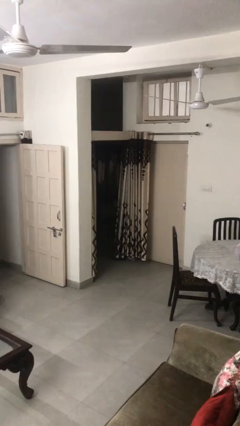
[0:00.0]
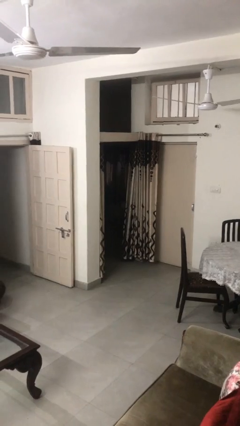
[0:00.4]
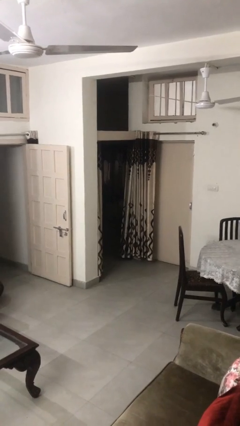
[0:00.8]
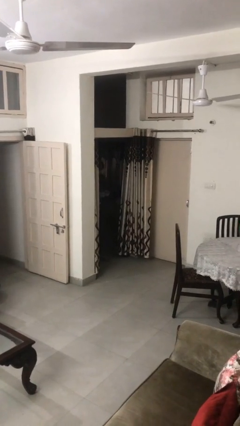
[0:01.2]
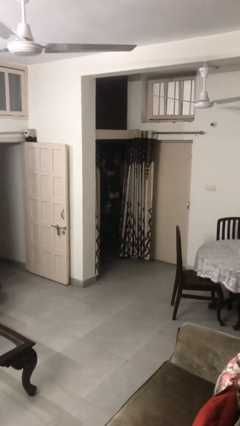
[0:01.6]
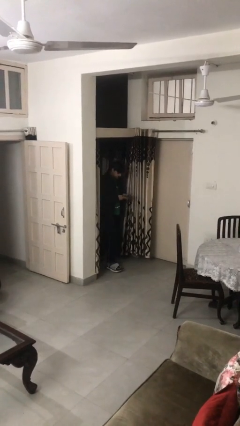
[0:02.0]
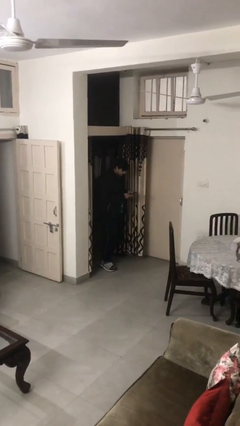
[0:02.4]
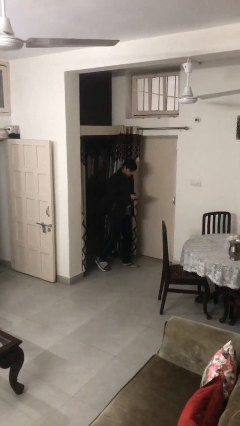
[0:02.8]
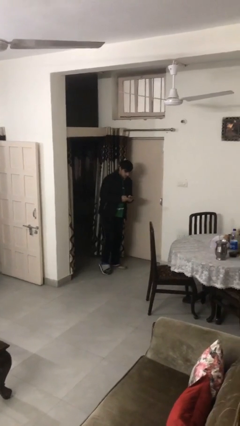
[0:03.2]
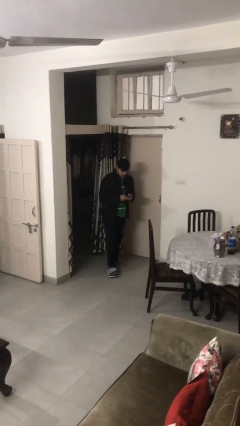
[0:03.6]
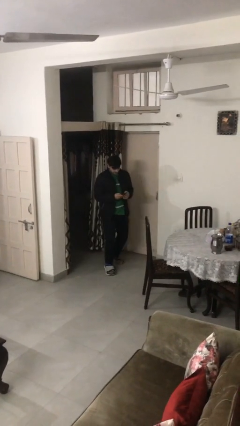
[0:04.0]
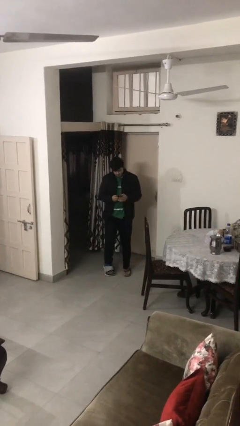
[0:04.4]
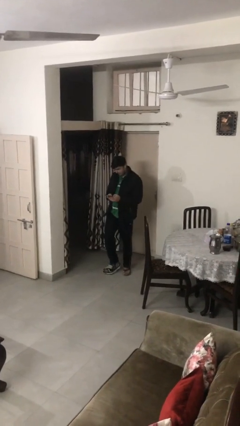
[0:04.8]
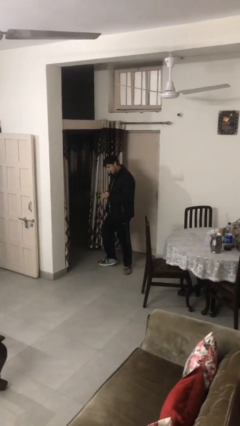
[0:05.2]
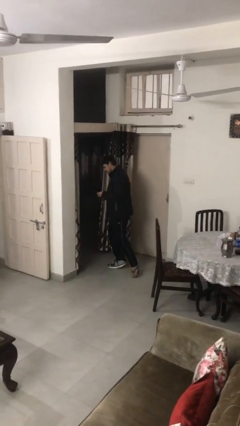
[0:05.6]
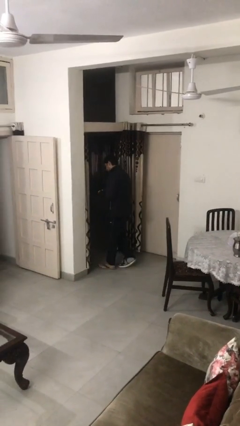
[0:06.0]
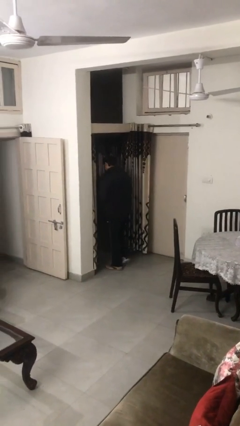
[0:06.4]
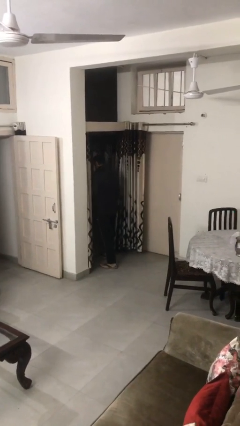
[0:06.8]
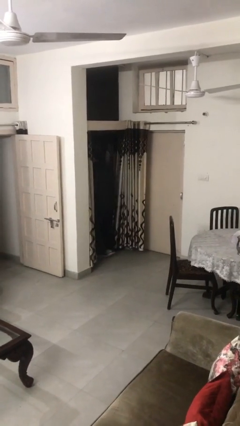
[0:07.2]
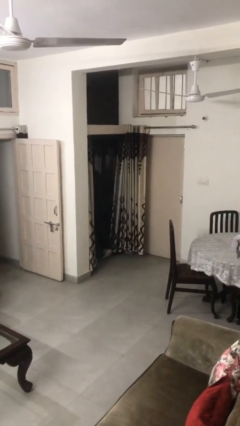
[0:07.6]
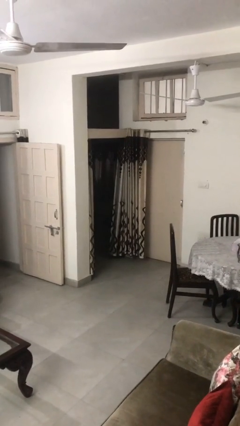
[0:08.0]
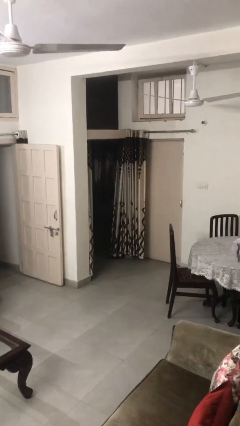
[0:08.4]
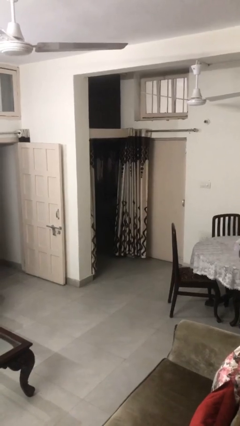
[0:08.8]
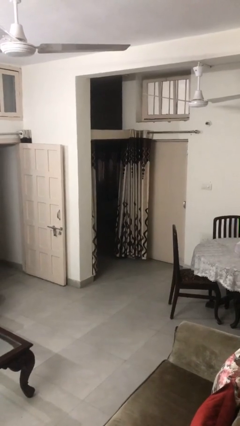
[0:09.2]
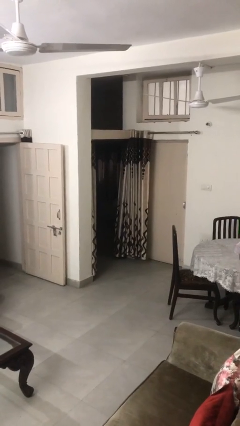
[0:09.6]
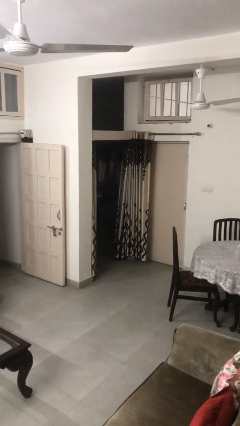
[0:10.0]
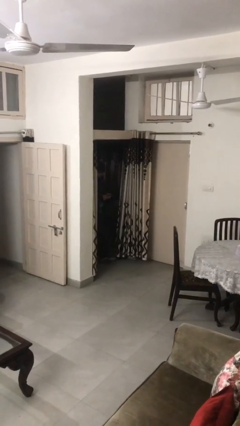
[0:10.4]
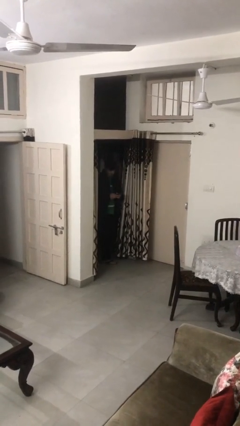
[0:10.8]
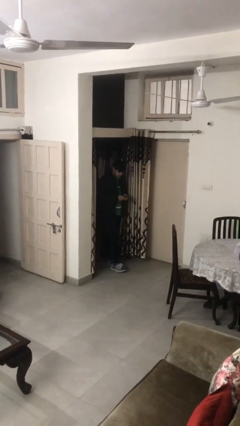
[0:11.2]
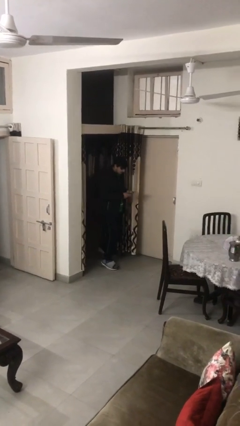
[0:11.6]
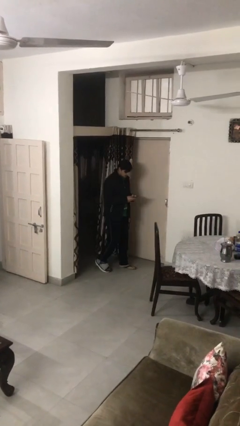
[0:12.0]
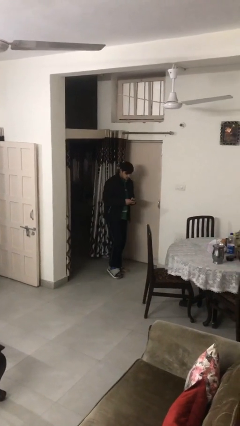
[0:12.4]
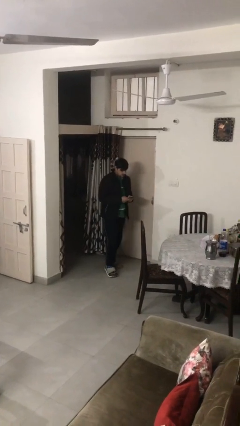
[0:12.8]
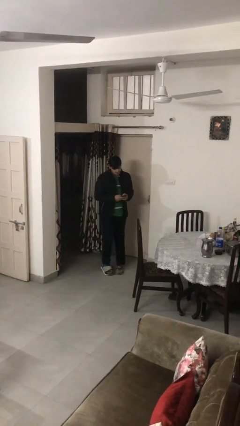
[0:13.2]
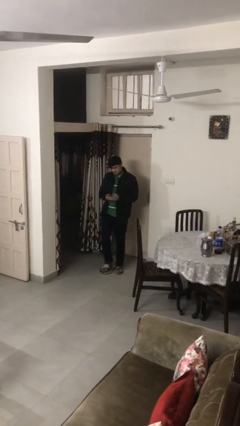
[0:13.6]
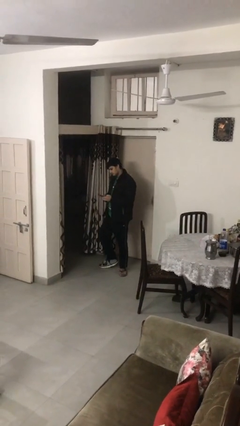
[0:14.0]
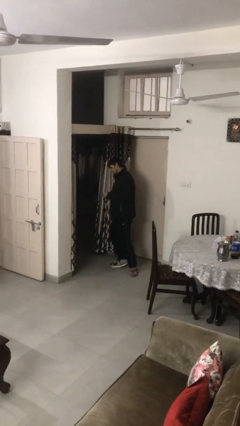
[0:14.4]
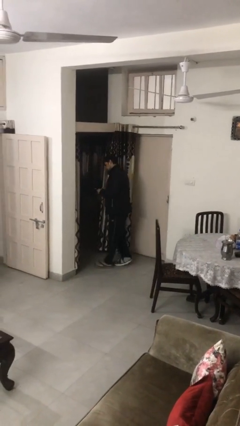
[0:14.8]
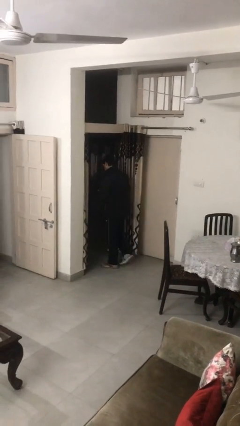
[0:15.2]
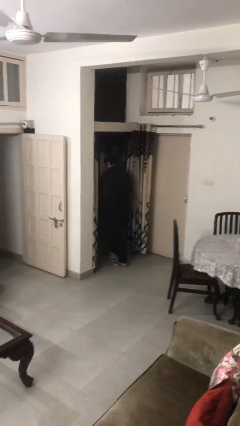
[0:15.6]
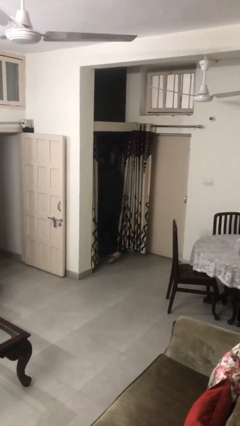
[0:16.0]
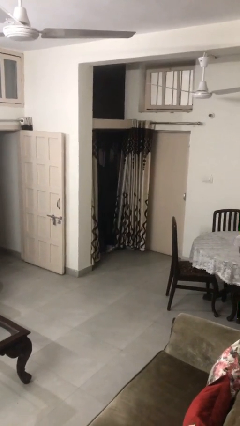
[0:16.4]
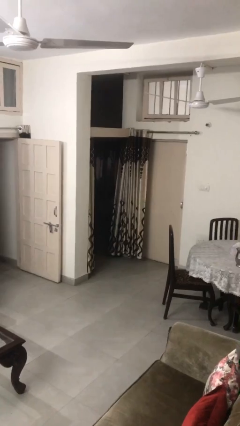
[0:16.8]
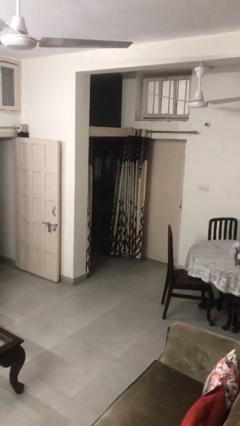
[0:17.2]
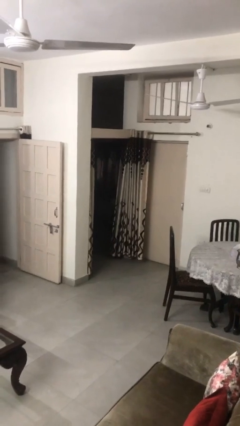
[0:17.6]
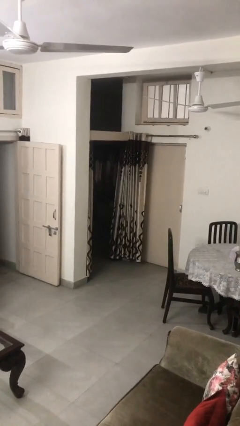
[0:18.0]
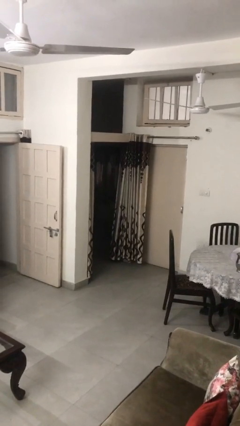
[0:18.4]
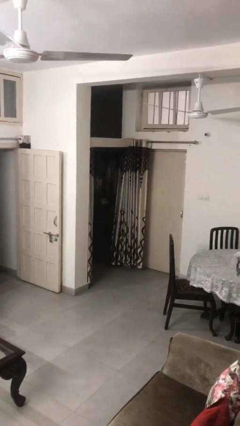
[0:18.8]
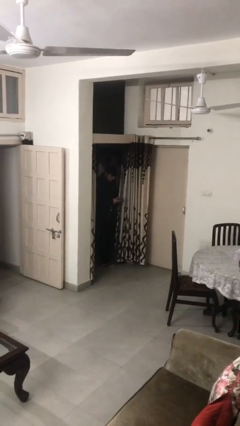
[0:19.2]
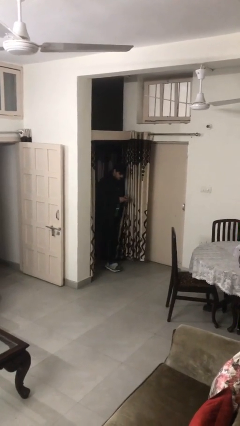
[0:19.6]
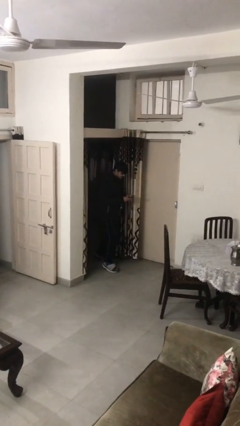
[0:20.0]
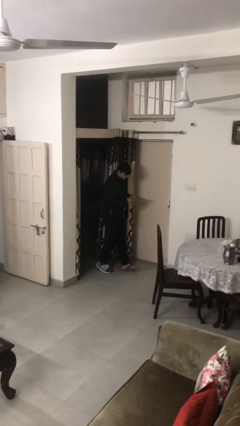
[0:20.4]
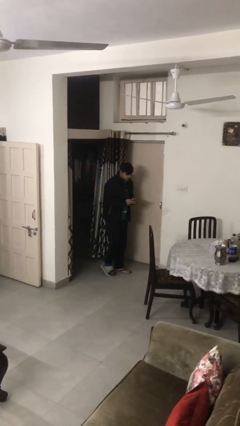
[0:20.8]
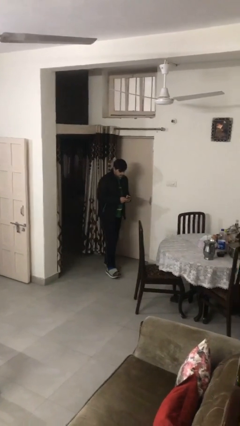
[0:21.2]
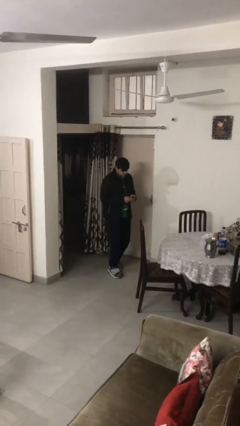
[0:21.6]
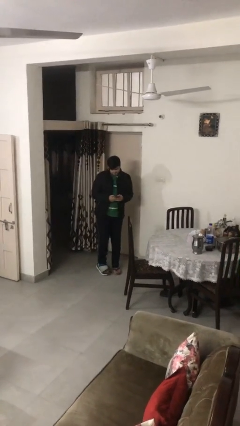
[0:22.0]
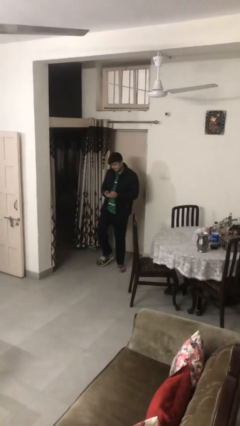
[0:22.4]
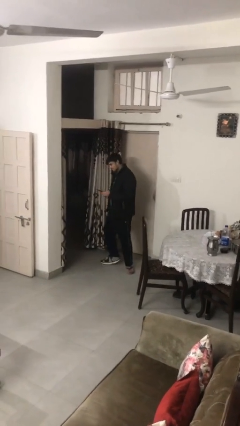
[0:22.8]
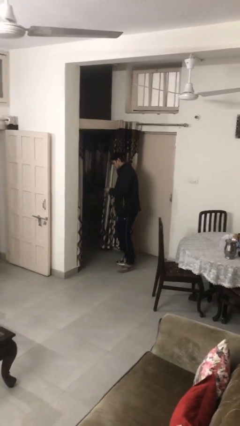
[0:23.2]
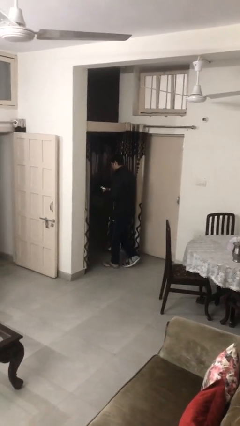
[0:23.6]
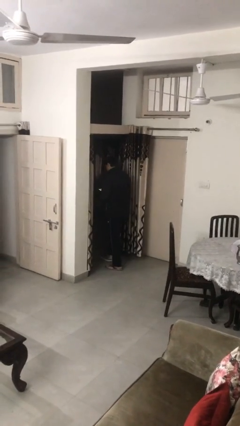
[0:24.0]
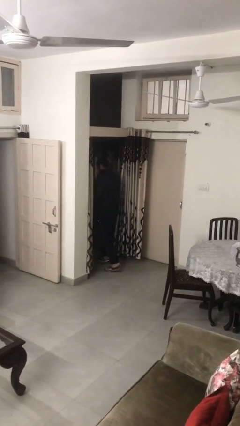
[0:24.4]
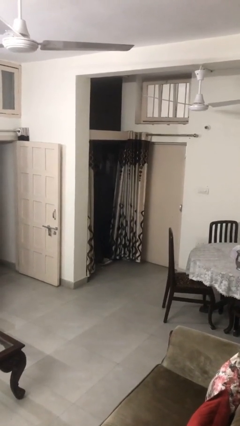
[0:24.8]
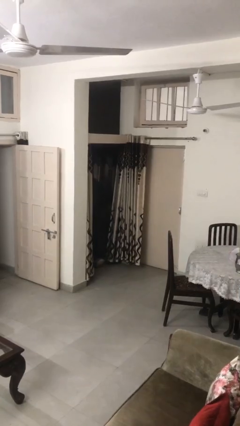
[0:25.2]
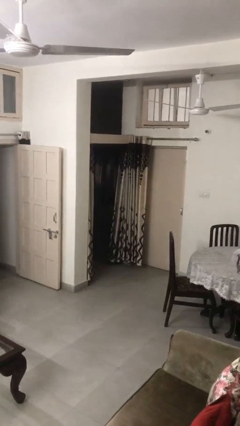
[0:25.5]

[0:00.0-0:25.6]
person texts on phone

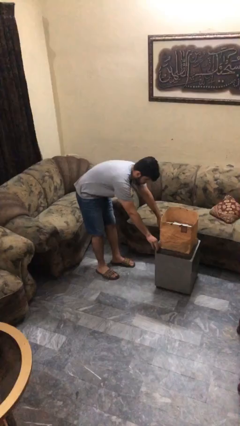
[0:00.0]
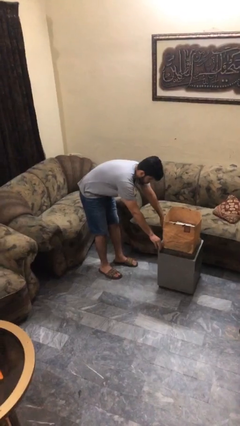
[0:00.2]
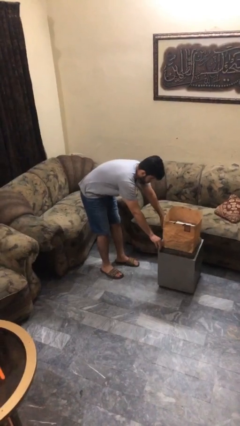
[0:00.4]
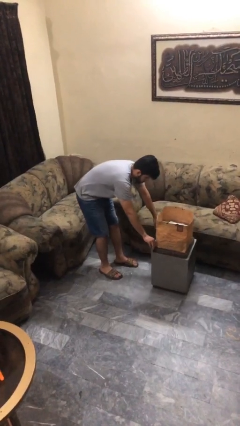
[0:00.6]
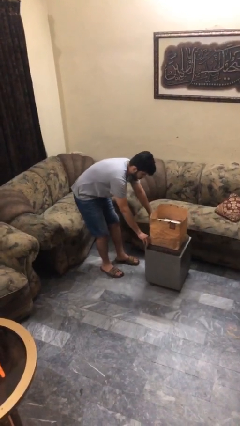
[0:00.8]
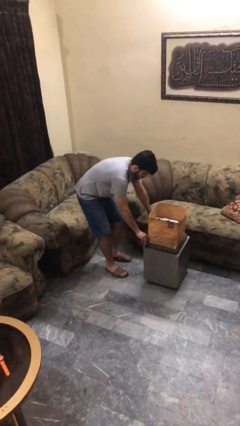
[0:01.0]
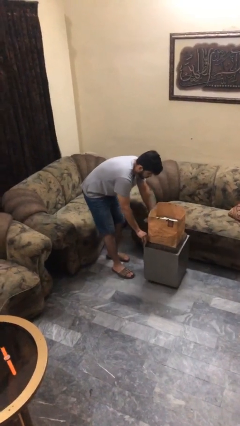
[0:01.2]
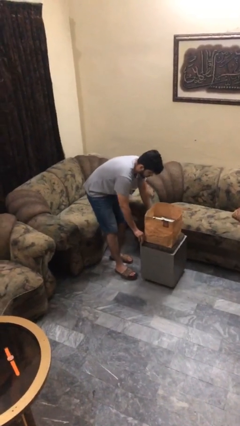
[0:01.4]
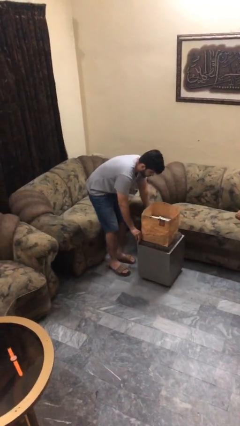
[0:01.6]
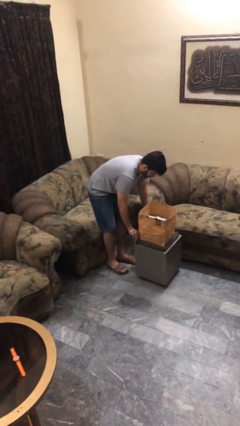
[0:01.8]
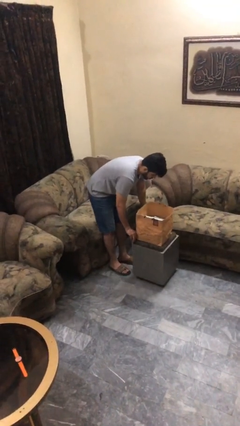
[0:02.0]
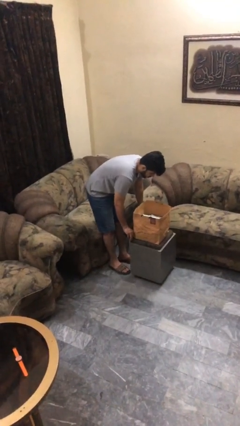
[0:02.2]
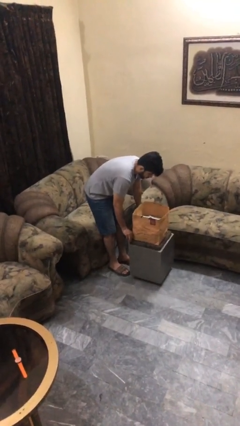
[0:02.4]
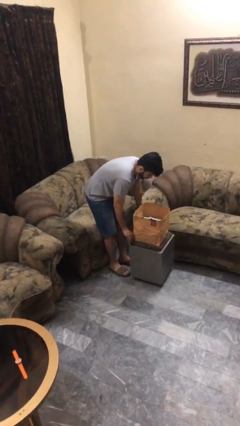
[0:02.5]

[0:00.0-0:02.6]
person pulls wheeled cart

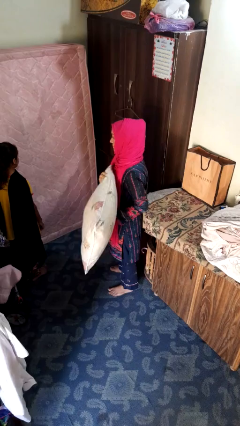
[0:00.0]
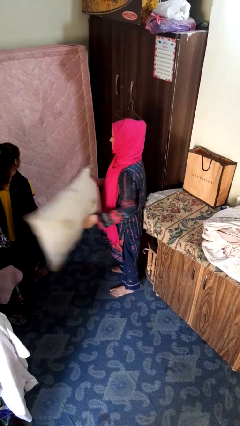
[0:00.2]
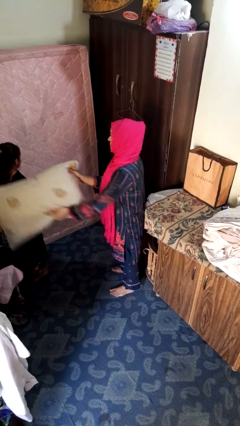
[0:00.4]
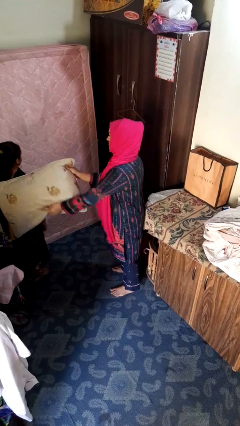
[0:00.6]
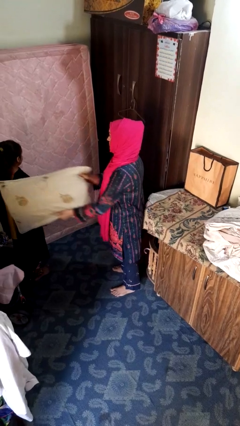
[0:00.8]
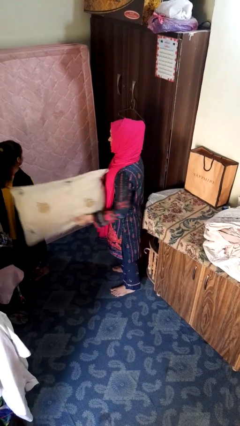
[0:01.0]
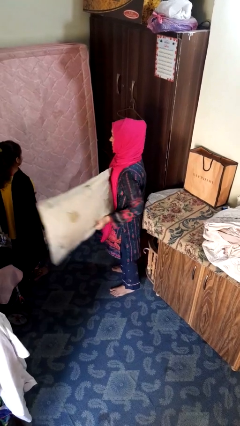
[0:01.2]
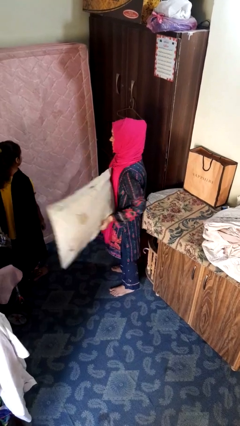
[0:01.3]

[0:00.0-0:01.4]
person hits person with pillow

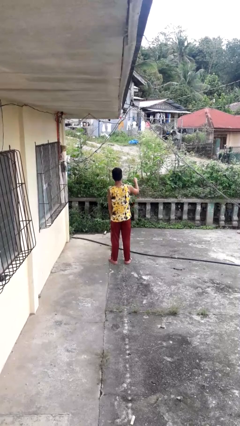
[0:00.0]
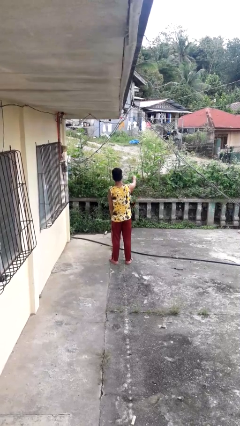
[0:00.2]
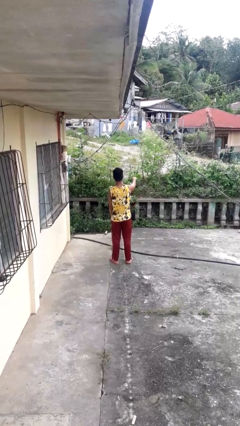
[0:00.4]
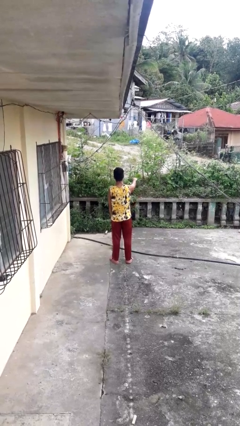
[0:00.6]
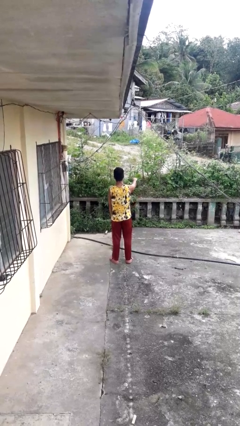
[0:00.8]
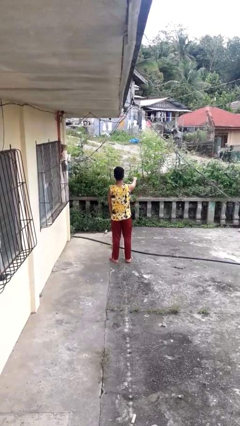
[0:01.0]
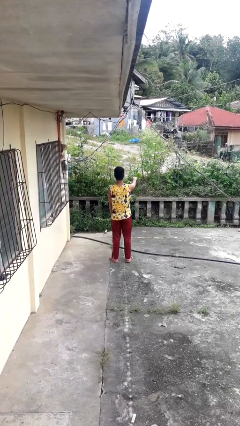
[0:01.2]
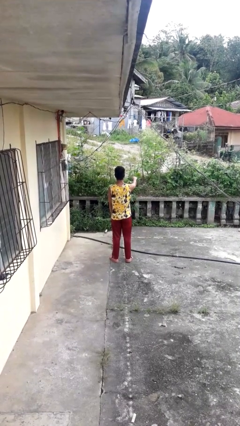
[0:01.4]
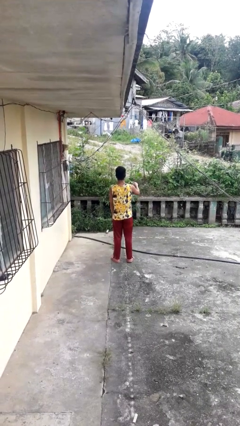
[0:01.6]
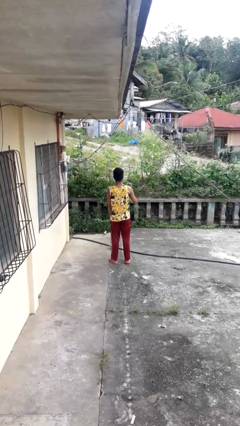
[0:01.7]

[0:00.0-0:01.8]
person punches
